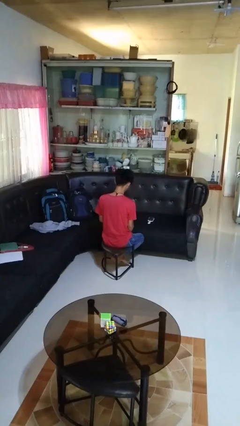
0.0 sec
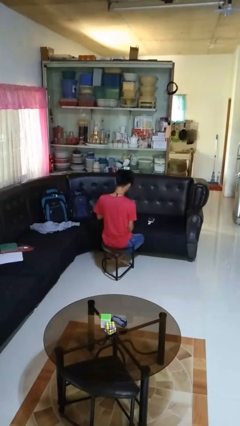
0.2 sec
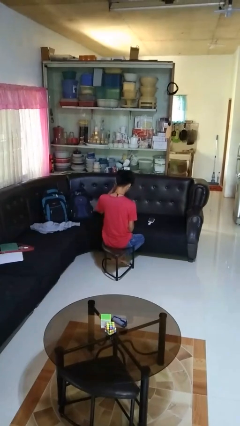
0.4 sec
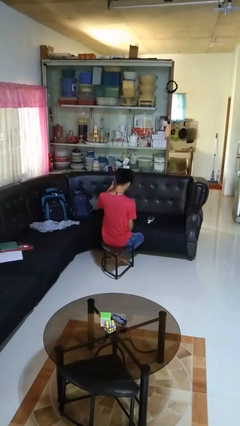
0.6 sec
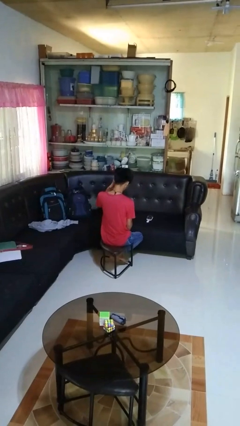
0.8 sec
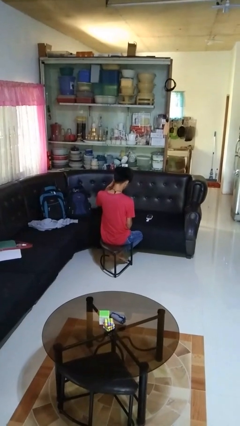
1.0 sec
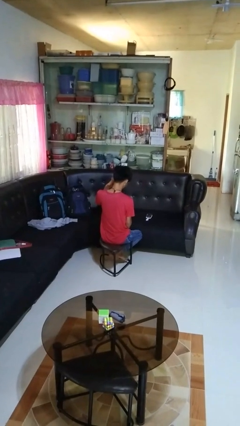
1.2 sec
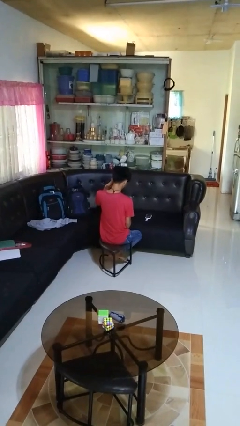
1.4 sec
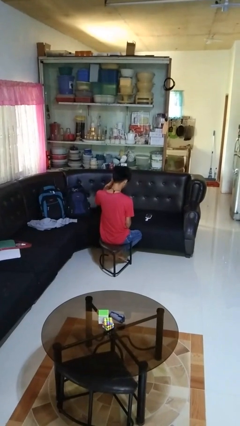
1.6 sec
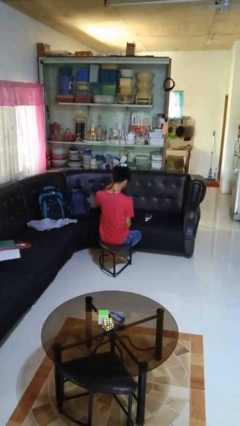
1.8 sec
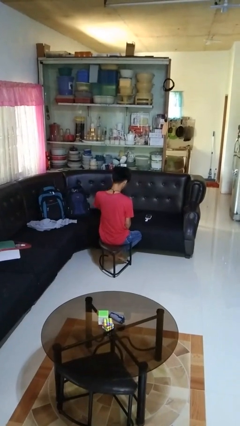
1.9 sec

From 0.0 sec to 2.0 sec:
person gestures call me

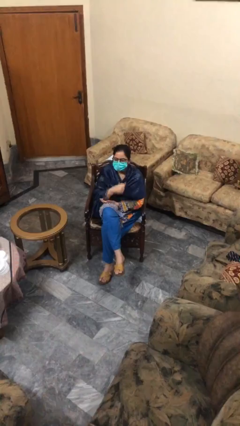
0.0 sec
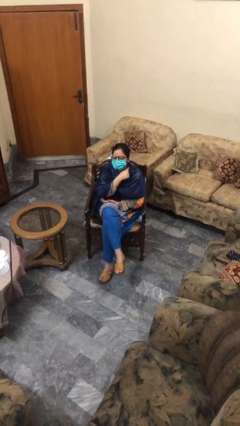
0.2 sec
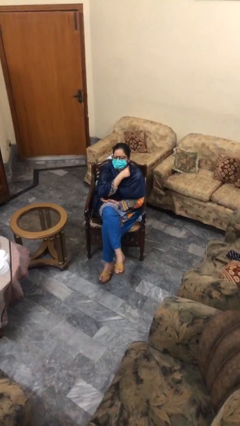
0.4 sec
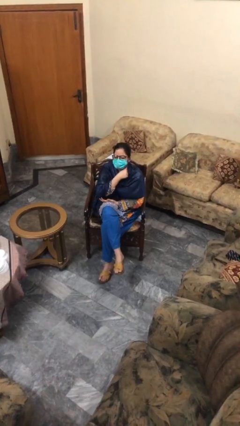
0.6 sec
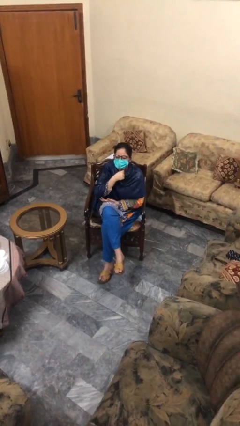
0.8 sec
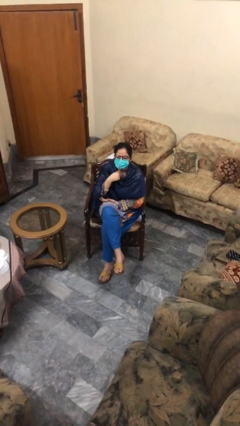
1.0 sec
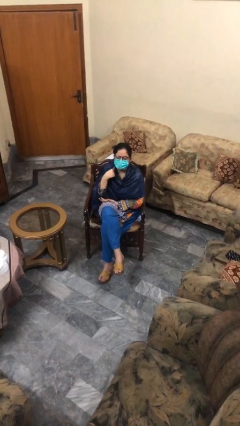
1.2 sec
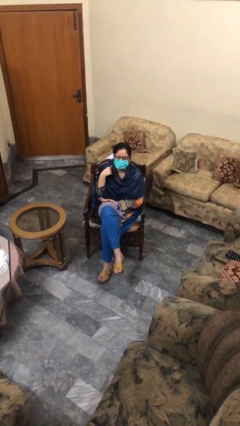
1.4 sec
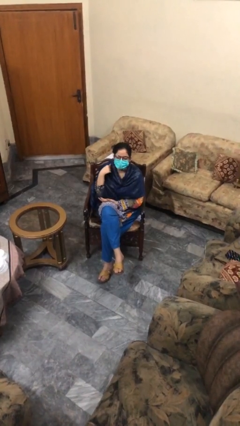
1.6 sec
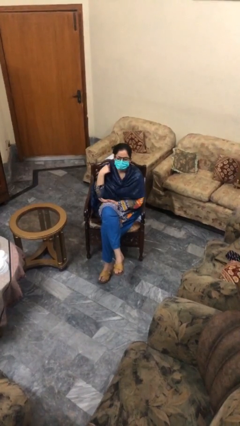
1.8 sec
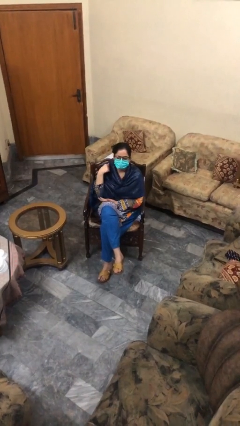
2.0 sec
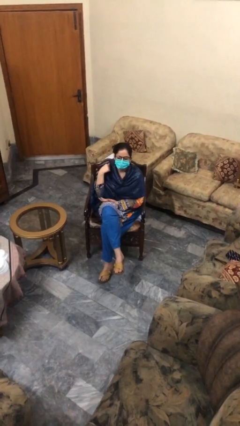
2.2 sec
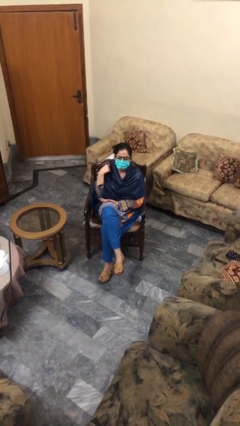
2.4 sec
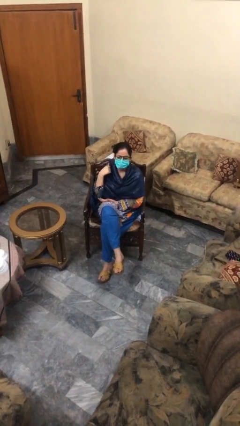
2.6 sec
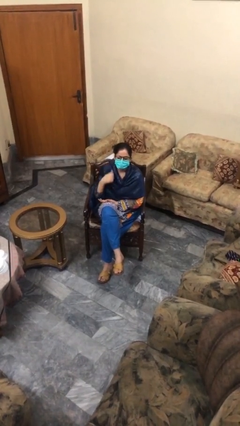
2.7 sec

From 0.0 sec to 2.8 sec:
person gestures cut

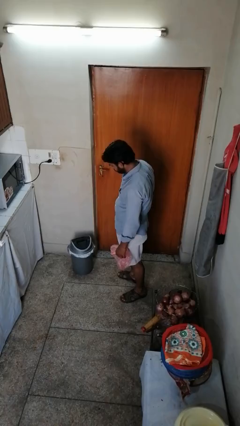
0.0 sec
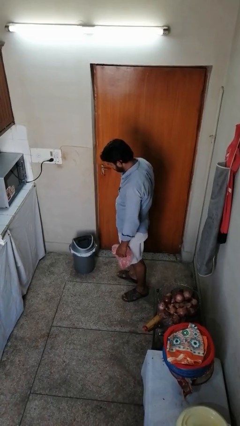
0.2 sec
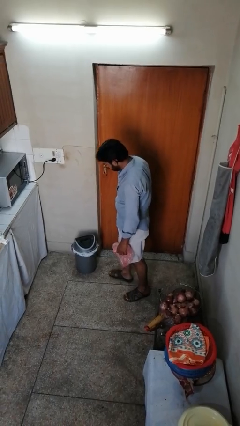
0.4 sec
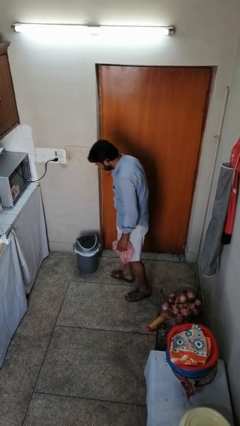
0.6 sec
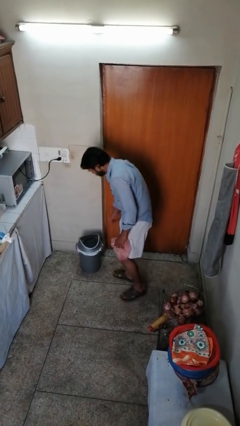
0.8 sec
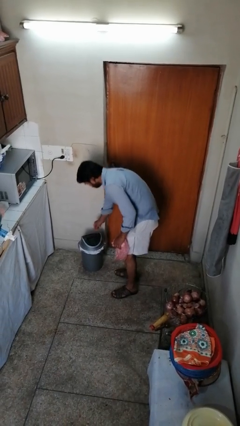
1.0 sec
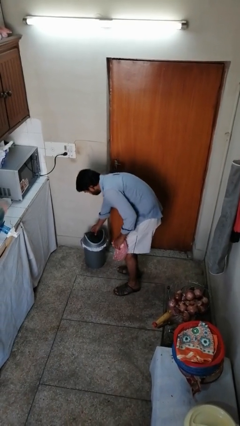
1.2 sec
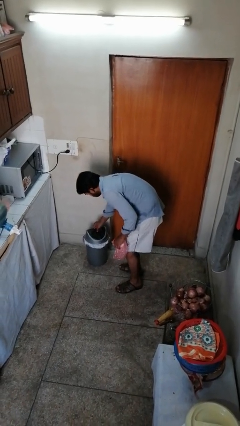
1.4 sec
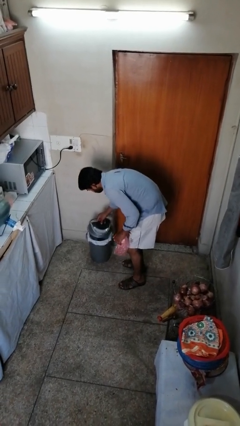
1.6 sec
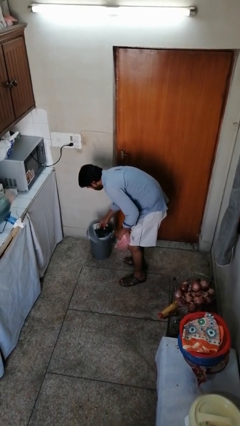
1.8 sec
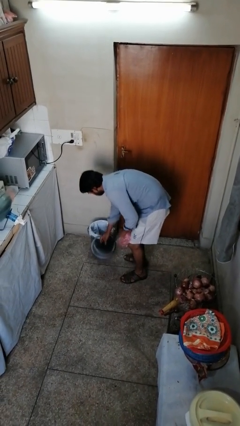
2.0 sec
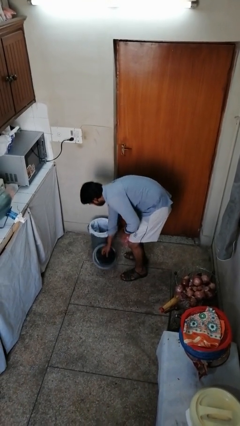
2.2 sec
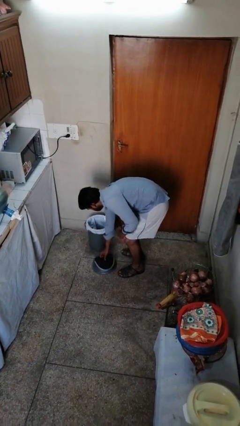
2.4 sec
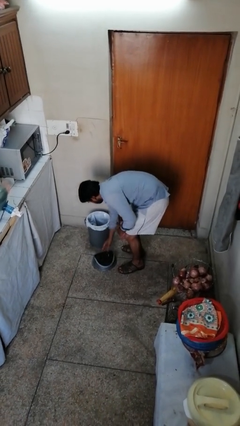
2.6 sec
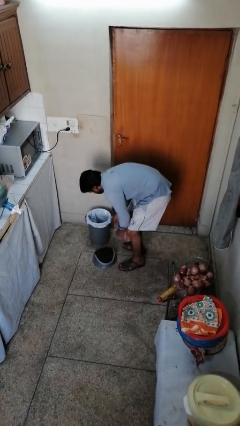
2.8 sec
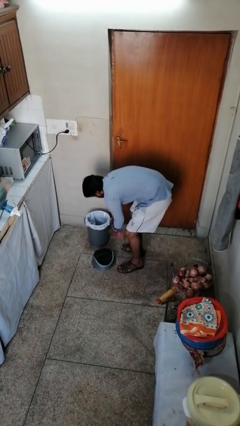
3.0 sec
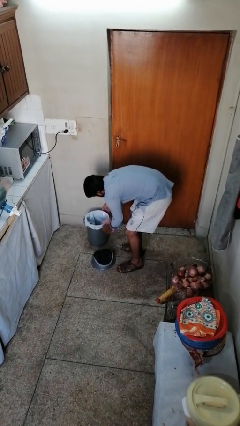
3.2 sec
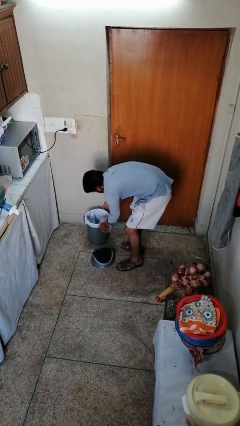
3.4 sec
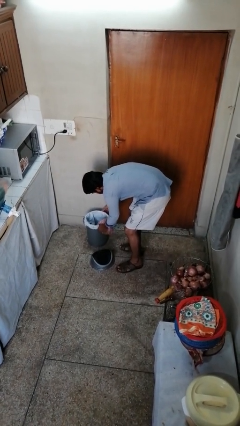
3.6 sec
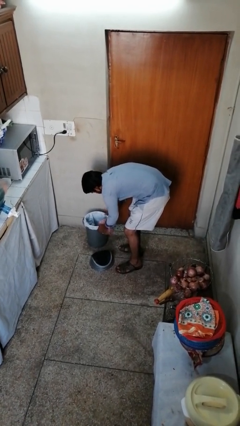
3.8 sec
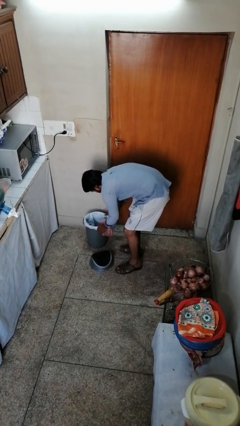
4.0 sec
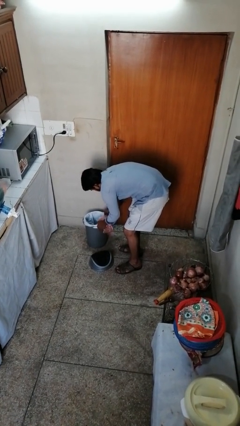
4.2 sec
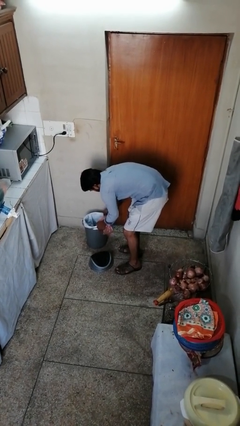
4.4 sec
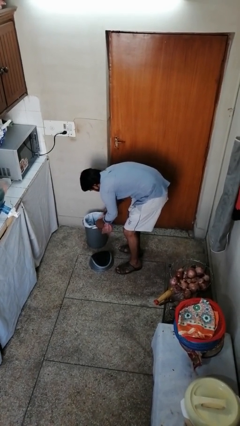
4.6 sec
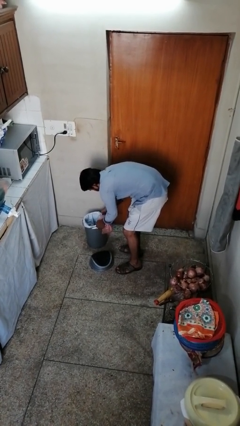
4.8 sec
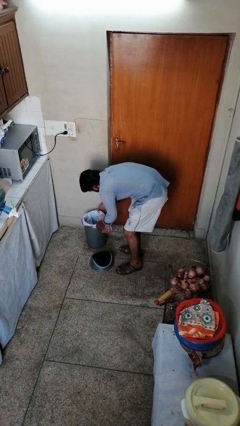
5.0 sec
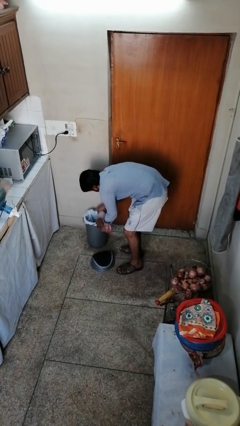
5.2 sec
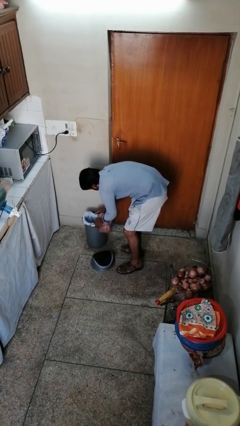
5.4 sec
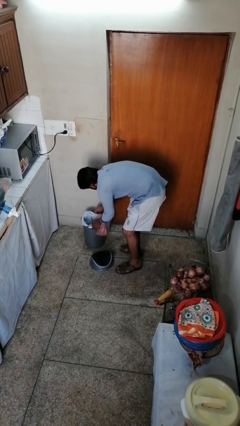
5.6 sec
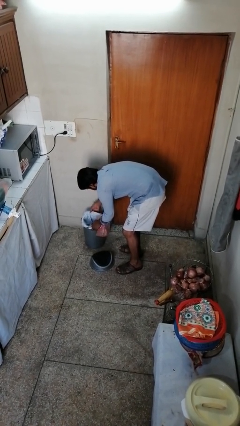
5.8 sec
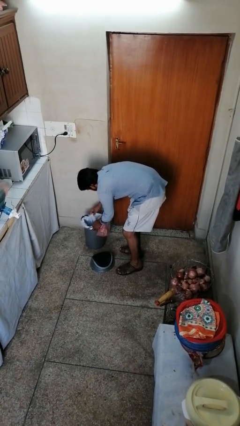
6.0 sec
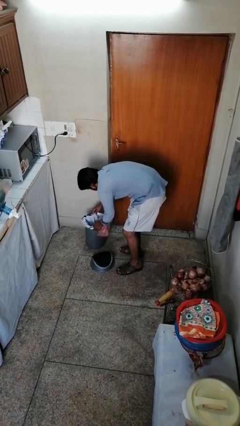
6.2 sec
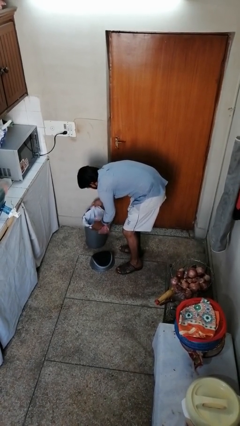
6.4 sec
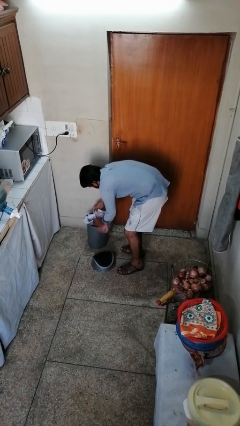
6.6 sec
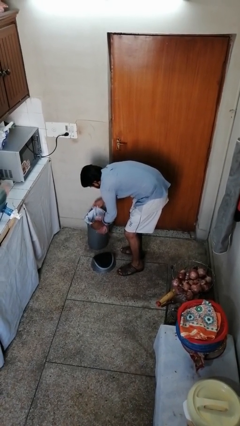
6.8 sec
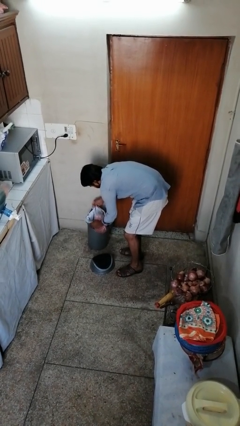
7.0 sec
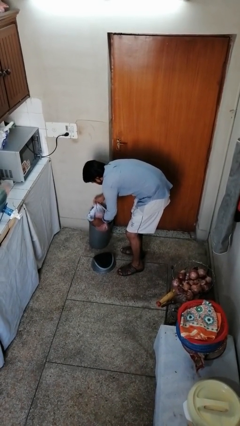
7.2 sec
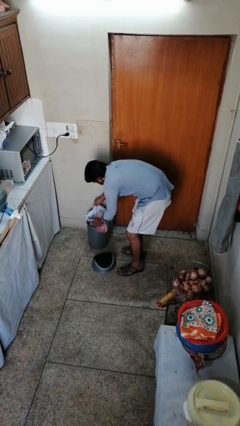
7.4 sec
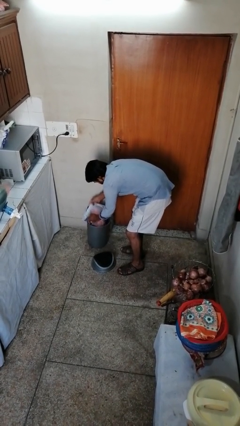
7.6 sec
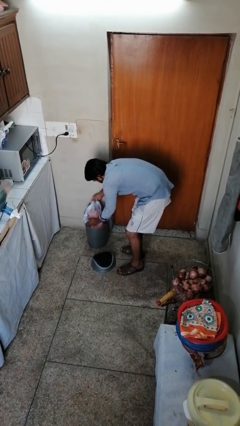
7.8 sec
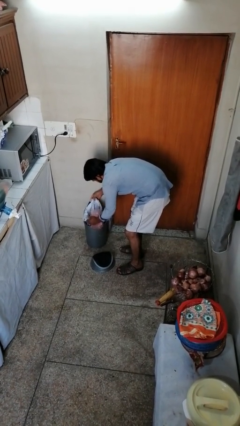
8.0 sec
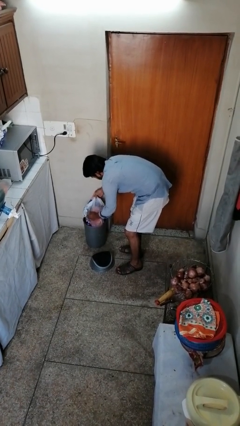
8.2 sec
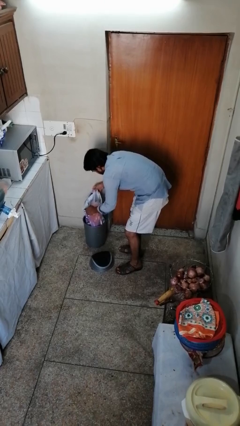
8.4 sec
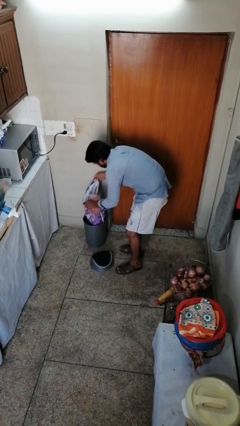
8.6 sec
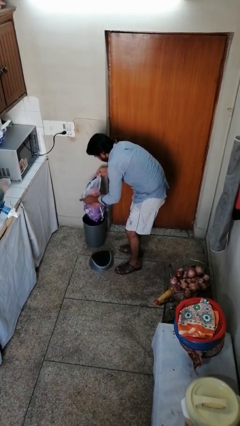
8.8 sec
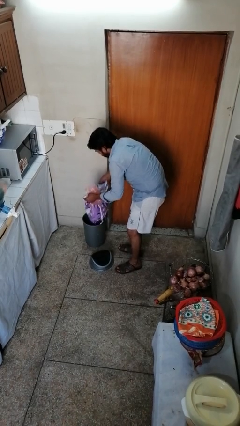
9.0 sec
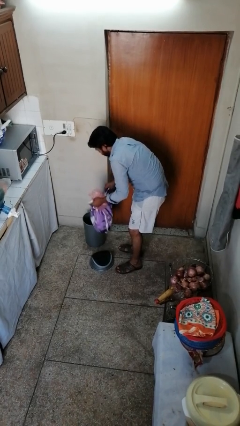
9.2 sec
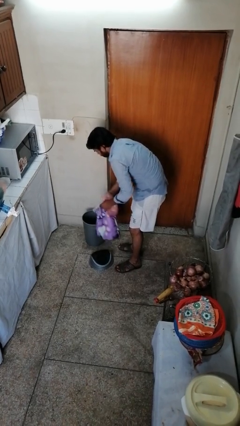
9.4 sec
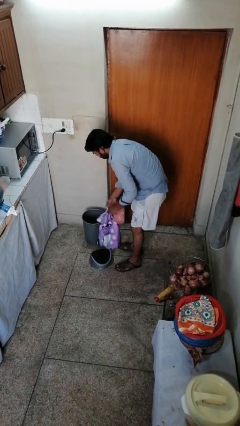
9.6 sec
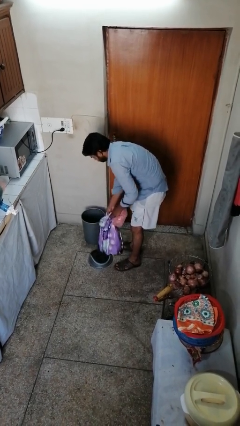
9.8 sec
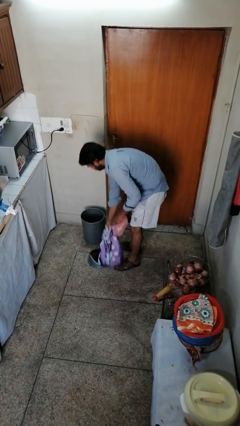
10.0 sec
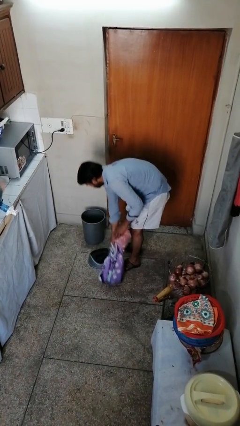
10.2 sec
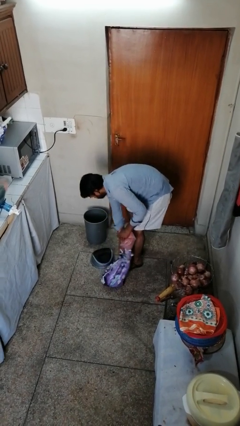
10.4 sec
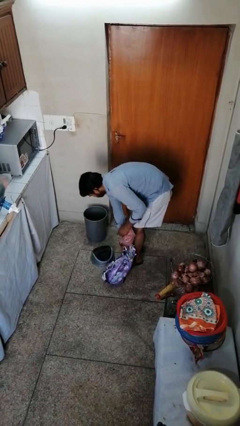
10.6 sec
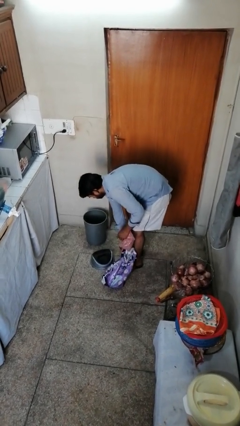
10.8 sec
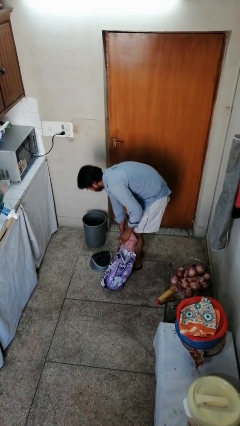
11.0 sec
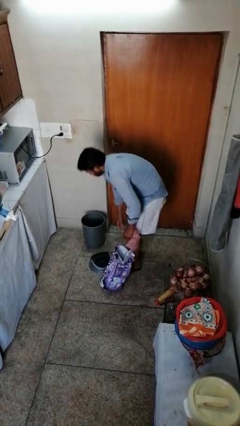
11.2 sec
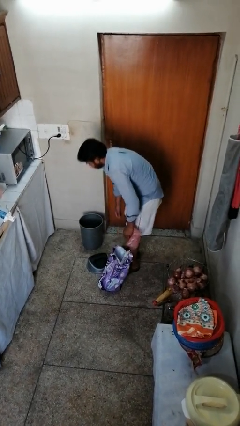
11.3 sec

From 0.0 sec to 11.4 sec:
person removes trashbag from trashcan

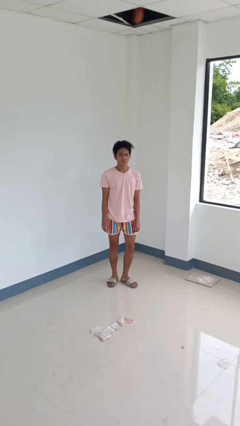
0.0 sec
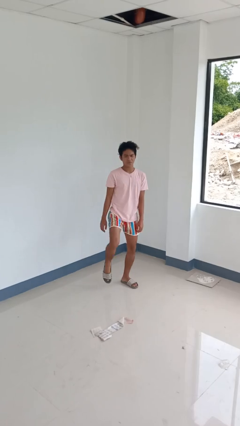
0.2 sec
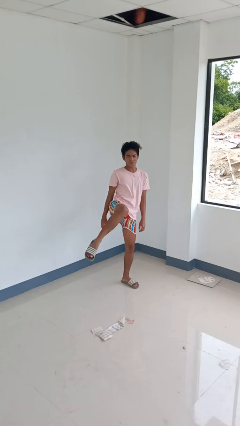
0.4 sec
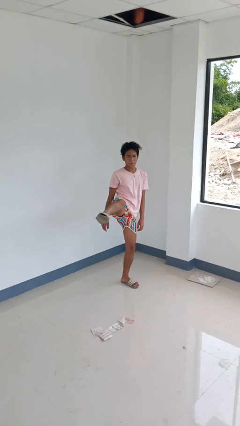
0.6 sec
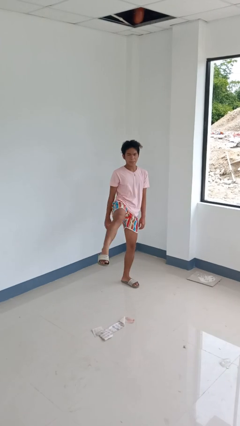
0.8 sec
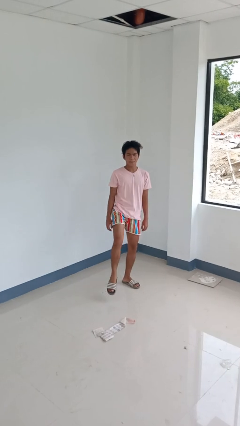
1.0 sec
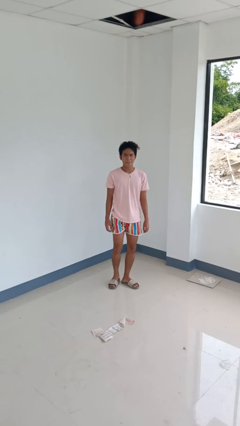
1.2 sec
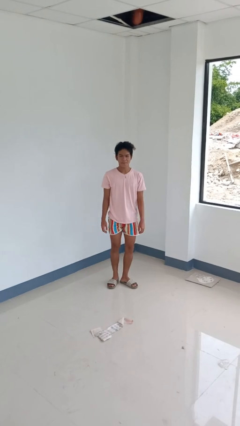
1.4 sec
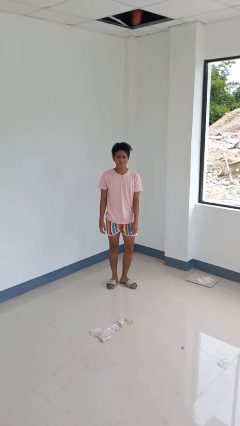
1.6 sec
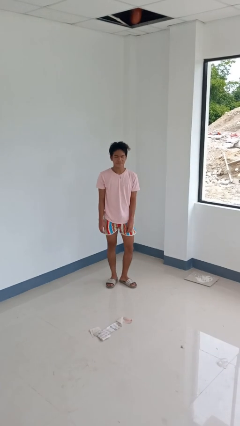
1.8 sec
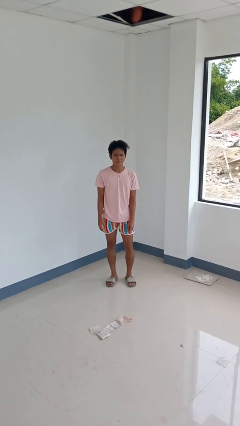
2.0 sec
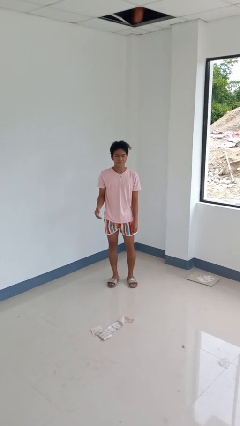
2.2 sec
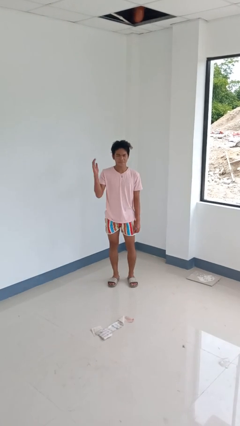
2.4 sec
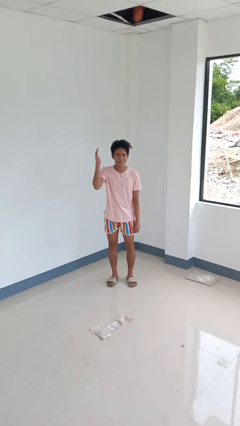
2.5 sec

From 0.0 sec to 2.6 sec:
person karate kicks
